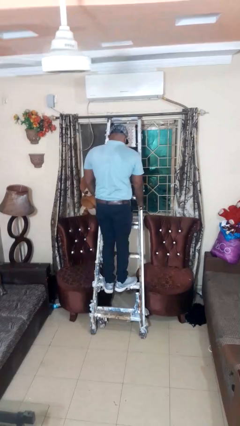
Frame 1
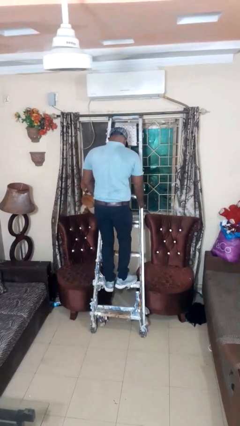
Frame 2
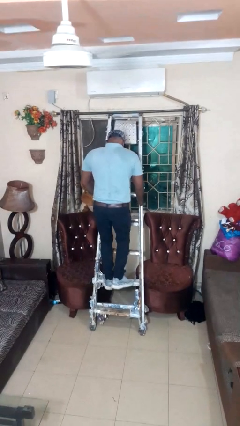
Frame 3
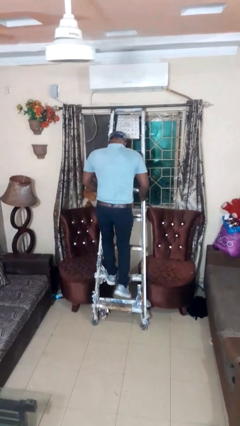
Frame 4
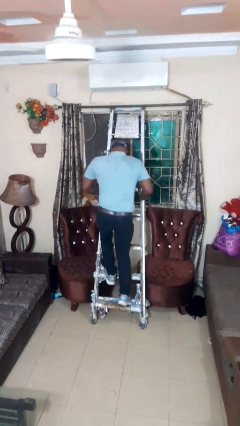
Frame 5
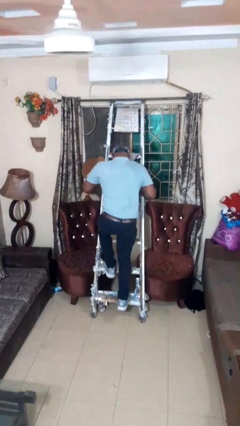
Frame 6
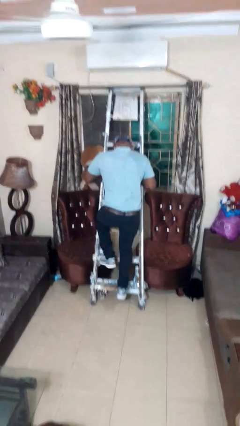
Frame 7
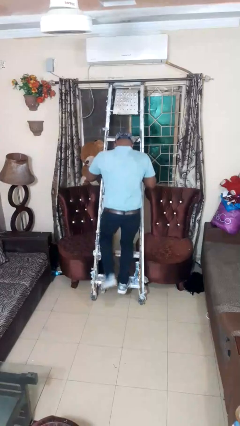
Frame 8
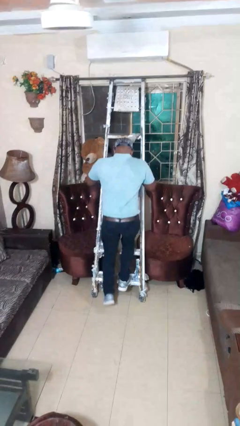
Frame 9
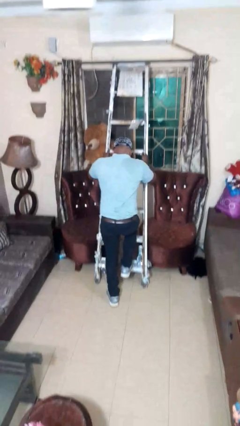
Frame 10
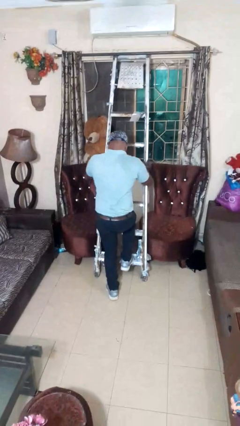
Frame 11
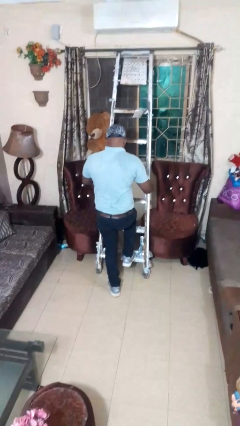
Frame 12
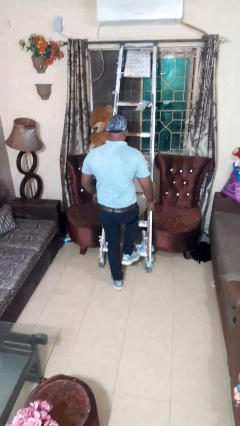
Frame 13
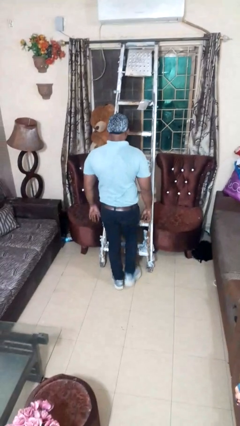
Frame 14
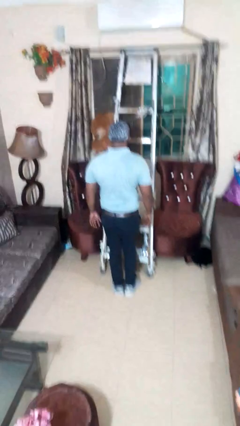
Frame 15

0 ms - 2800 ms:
person climbs down ladder

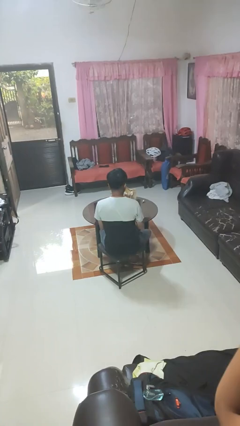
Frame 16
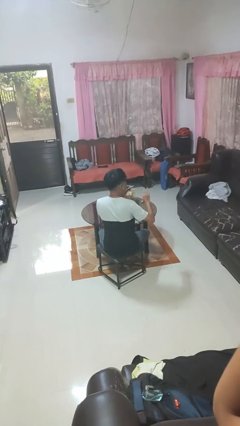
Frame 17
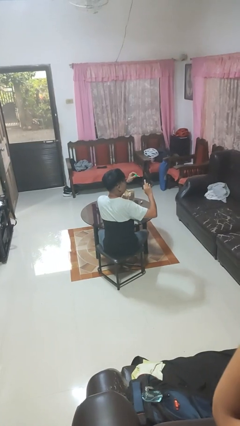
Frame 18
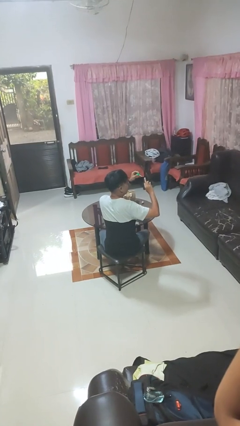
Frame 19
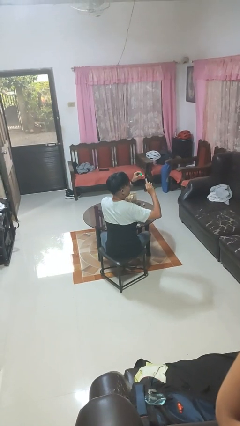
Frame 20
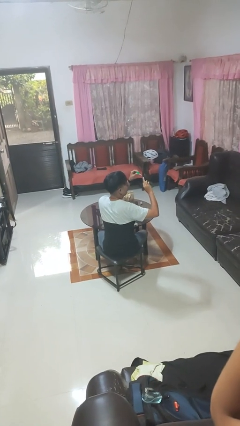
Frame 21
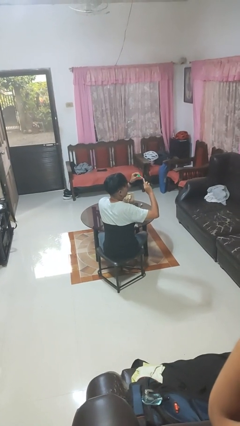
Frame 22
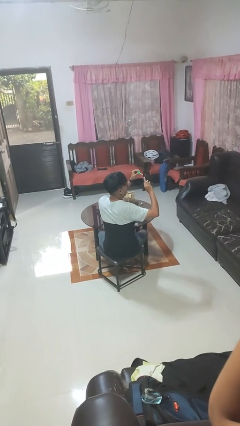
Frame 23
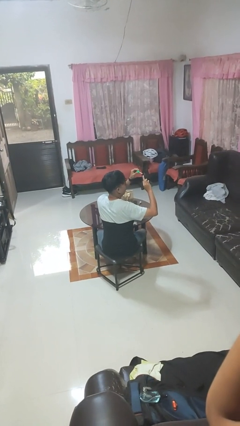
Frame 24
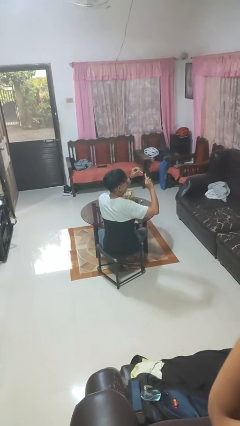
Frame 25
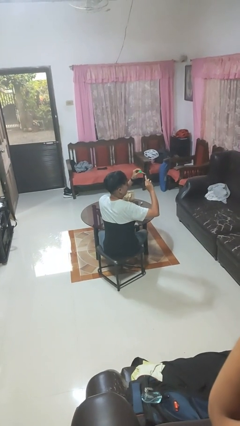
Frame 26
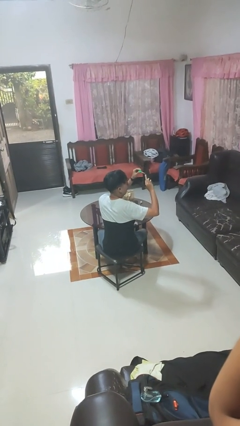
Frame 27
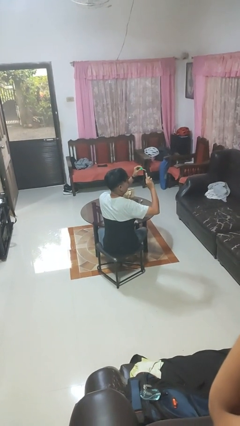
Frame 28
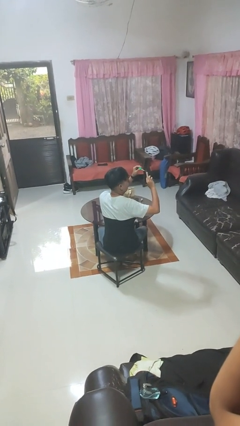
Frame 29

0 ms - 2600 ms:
person paints fingernails

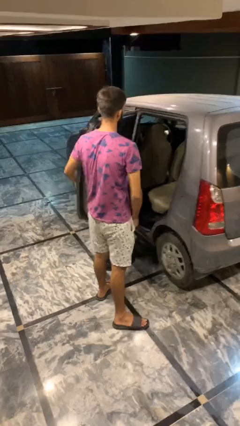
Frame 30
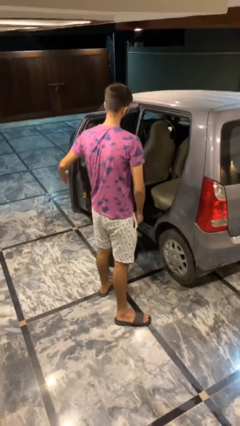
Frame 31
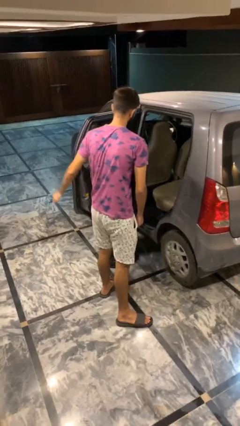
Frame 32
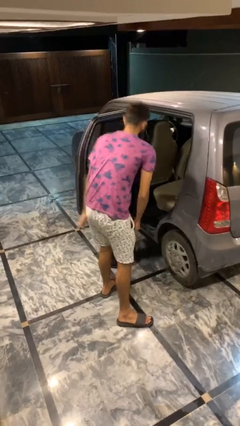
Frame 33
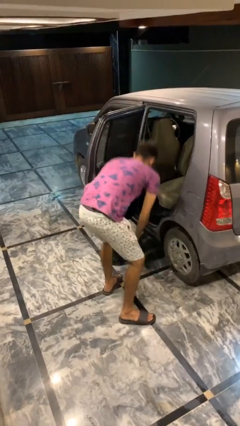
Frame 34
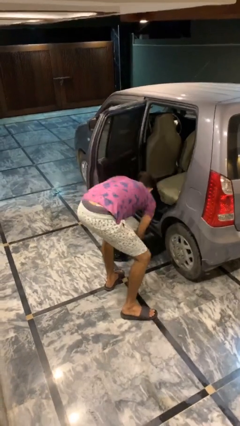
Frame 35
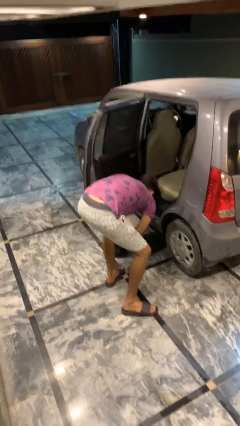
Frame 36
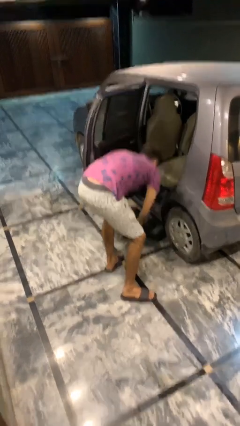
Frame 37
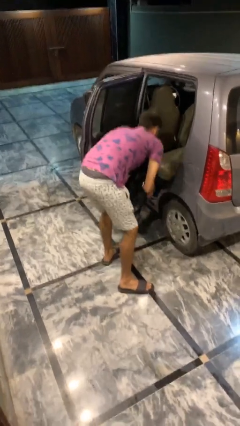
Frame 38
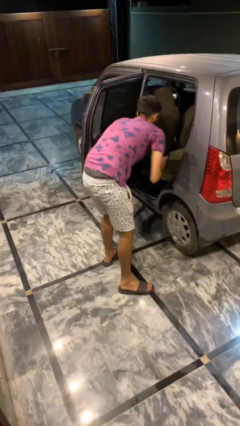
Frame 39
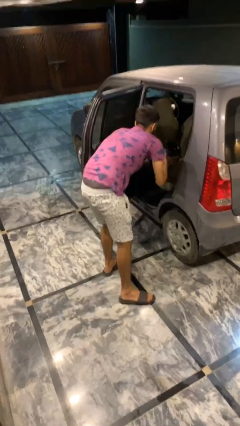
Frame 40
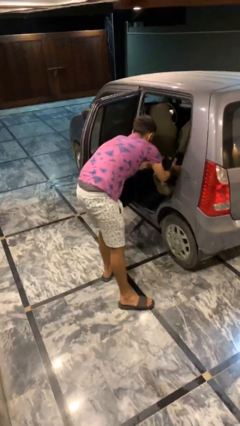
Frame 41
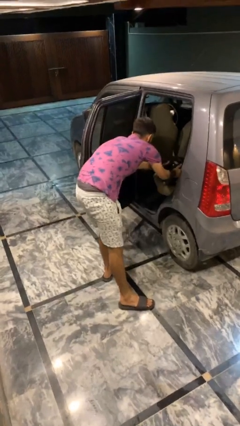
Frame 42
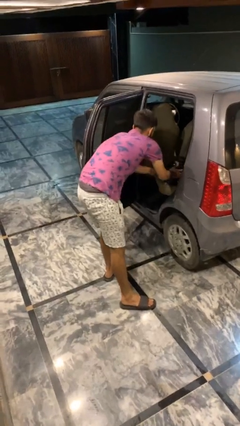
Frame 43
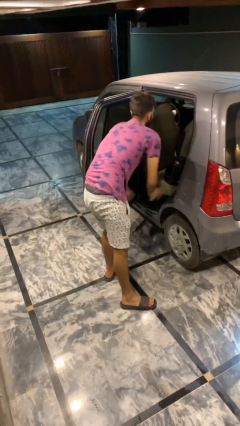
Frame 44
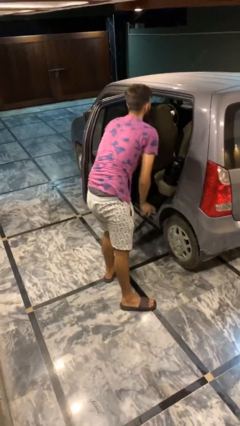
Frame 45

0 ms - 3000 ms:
person loads car

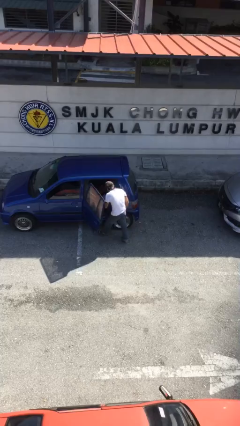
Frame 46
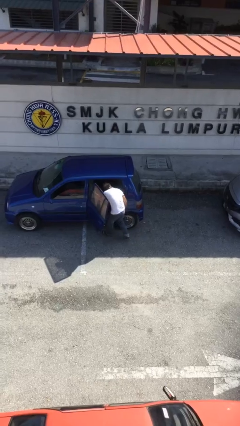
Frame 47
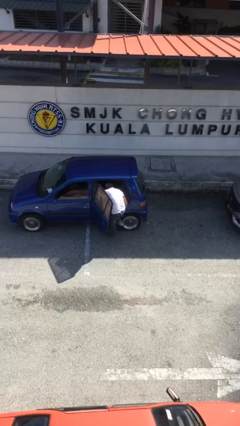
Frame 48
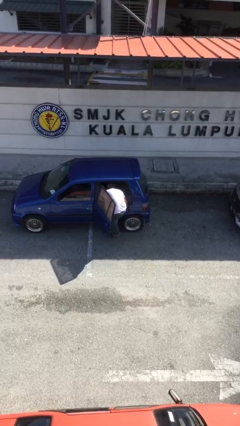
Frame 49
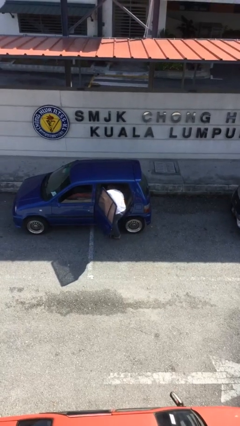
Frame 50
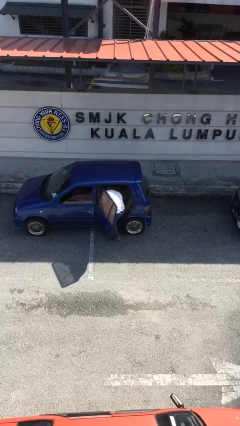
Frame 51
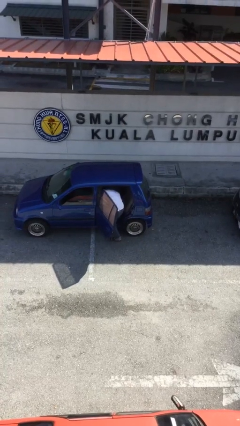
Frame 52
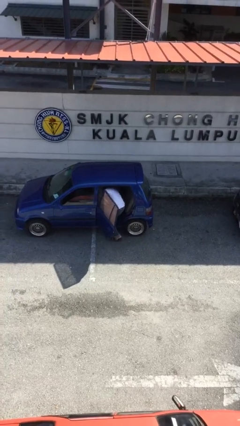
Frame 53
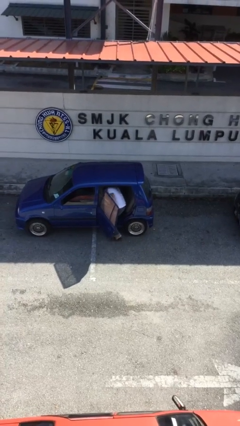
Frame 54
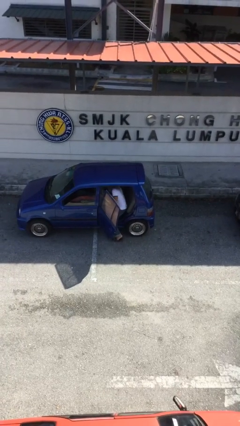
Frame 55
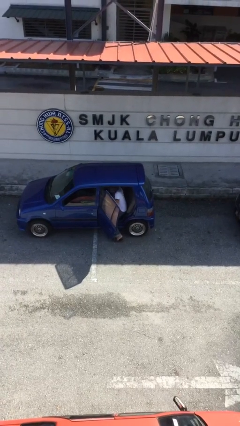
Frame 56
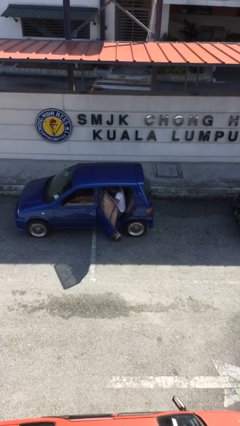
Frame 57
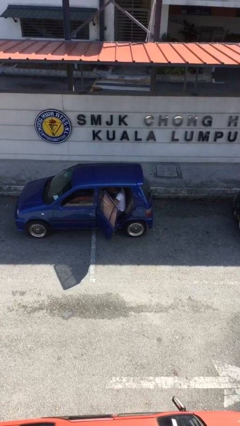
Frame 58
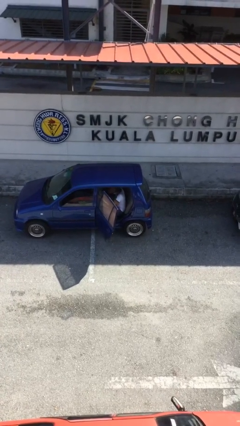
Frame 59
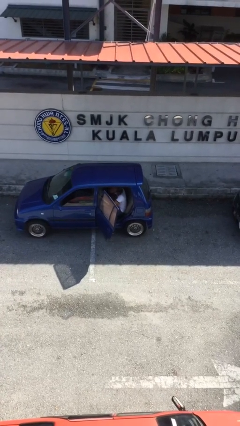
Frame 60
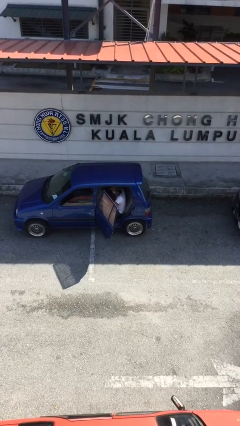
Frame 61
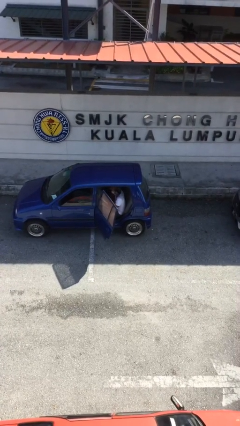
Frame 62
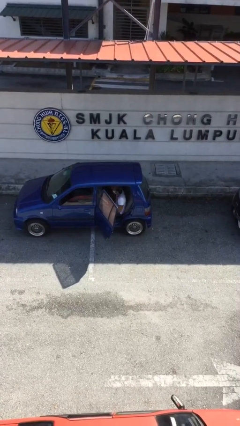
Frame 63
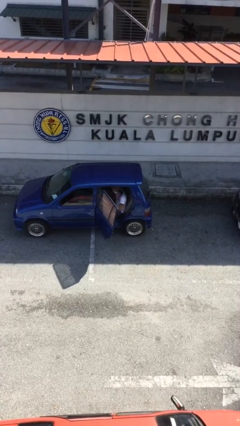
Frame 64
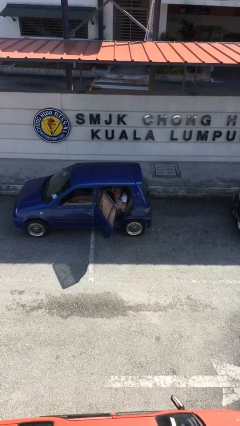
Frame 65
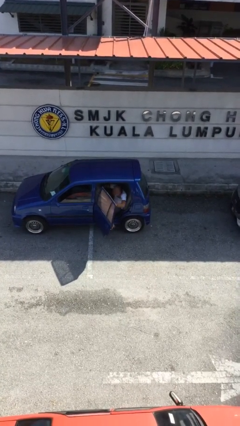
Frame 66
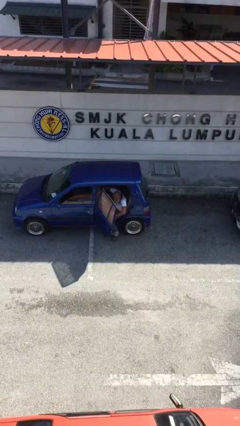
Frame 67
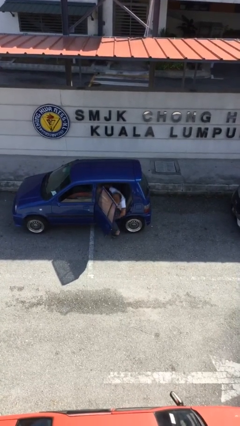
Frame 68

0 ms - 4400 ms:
person enters car

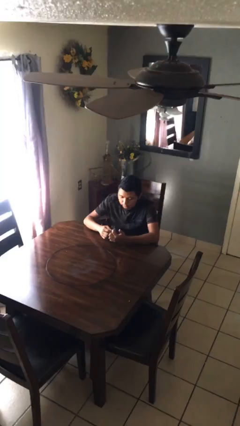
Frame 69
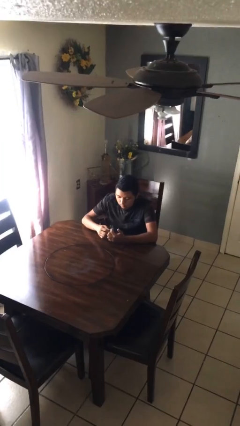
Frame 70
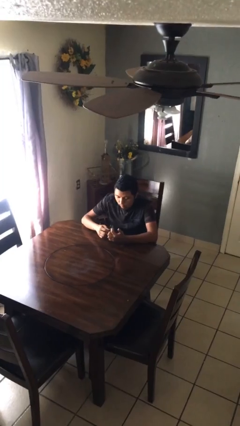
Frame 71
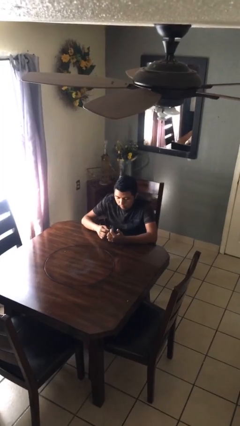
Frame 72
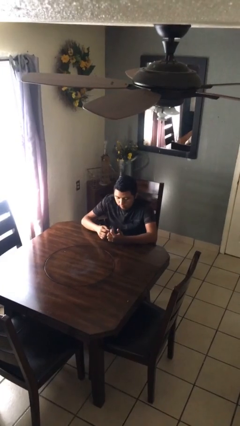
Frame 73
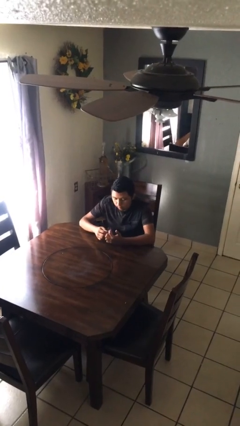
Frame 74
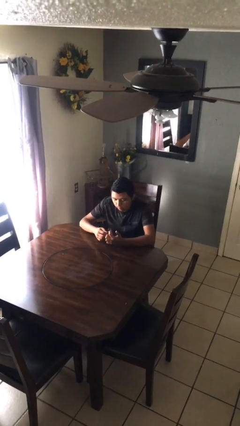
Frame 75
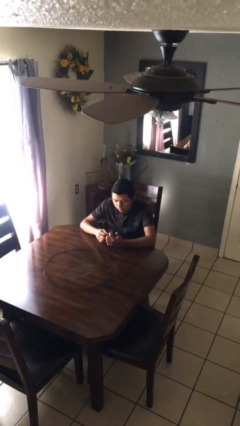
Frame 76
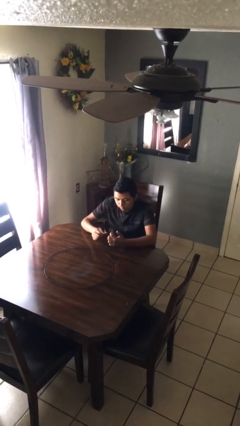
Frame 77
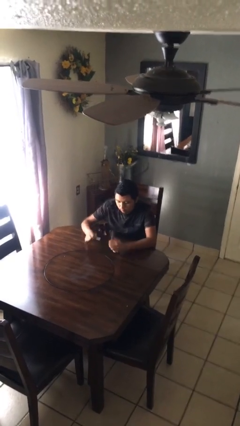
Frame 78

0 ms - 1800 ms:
person files fingernails

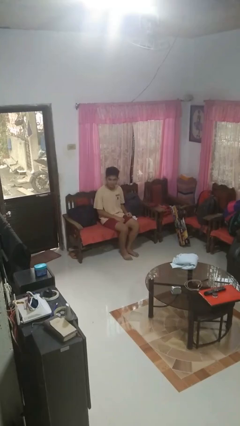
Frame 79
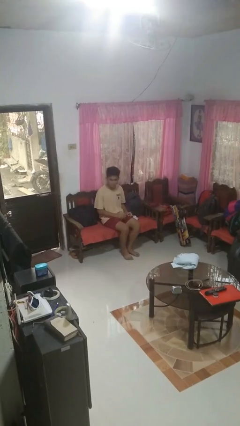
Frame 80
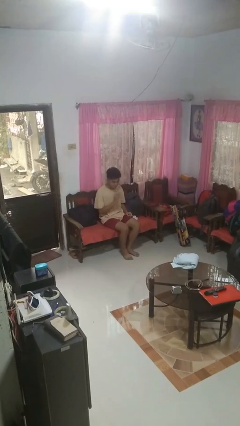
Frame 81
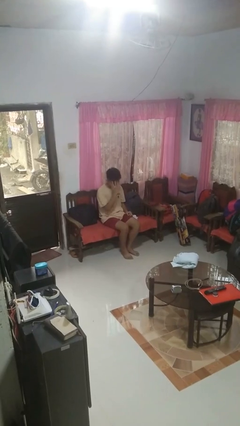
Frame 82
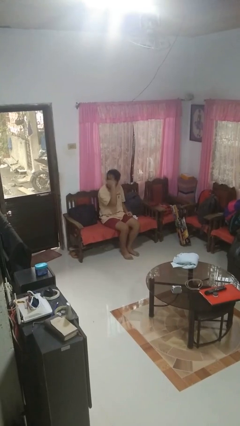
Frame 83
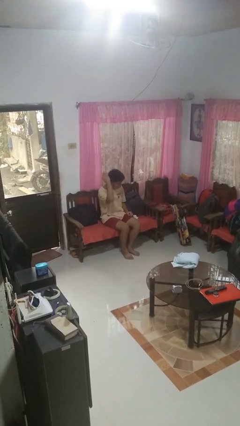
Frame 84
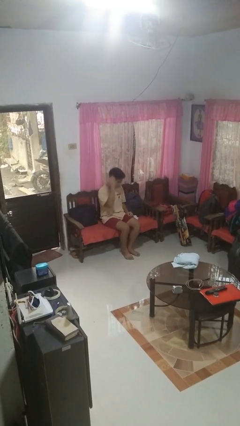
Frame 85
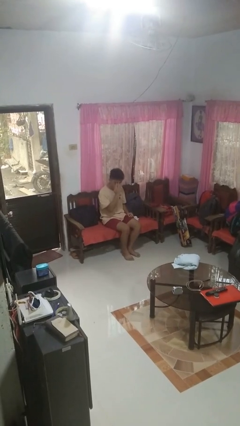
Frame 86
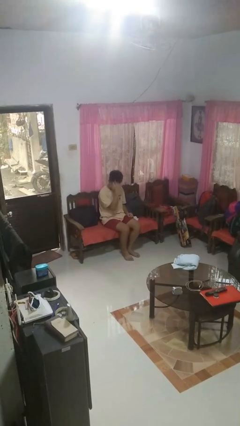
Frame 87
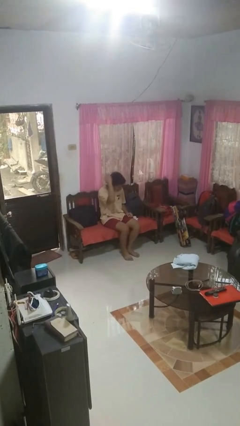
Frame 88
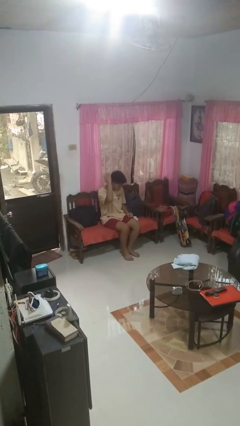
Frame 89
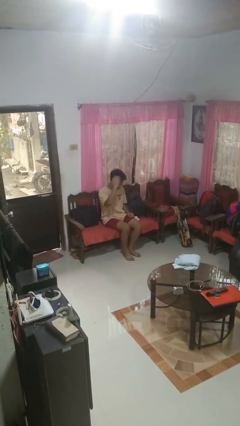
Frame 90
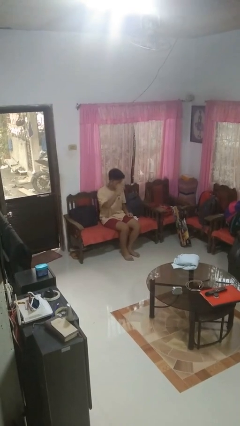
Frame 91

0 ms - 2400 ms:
person strokes hair

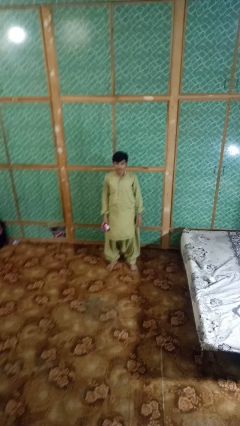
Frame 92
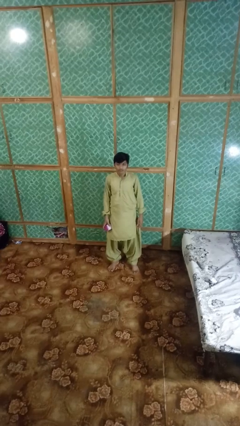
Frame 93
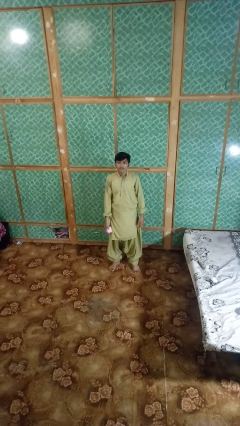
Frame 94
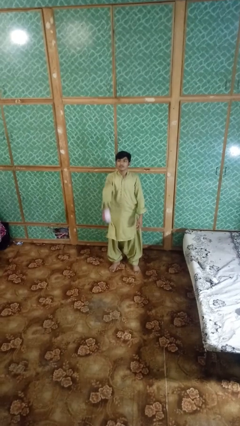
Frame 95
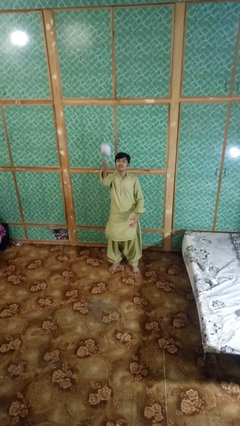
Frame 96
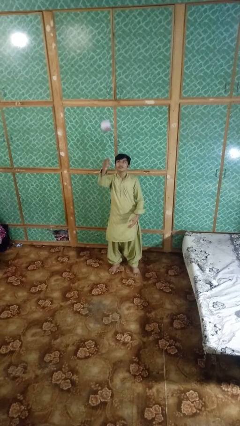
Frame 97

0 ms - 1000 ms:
person drops object
